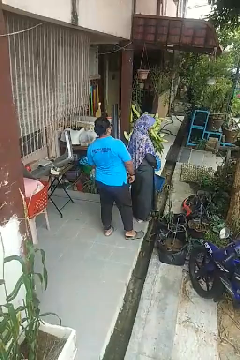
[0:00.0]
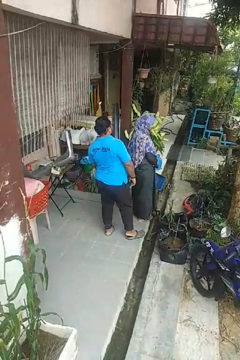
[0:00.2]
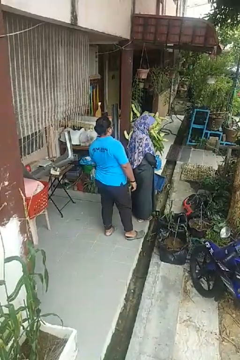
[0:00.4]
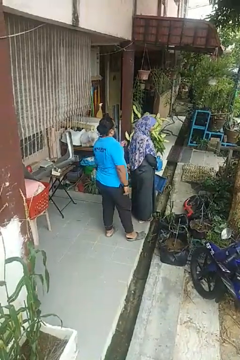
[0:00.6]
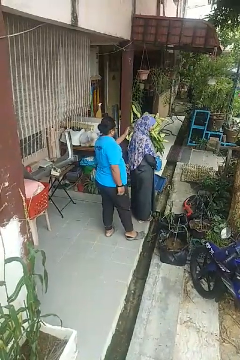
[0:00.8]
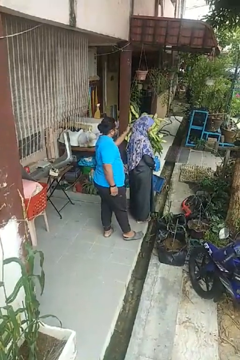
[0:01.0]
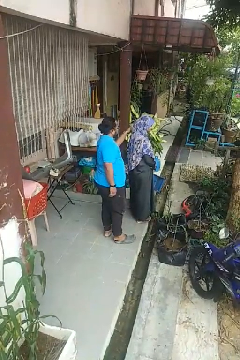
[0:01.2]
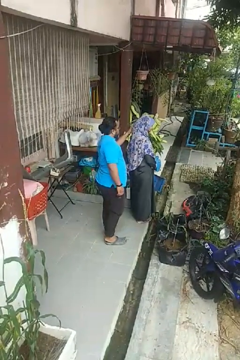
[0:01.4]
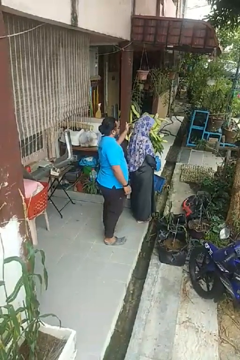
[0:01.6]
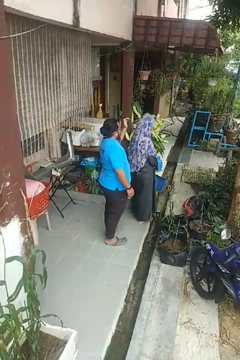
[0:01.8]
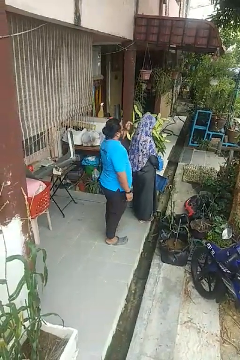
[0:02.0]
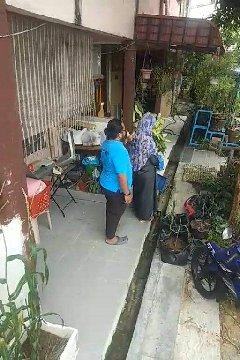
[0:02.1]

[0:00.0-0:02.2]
person touches back of person

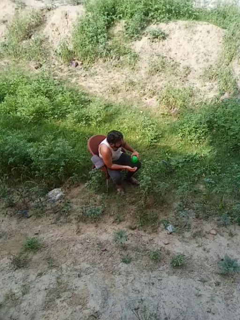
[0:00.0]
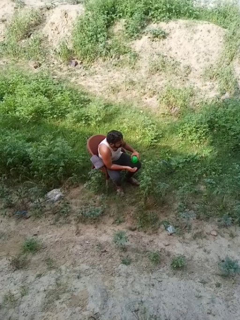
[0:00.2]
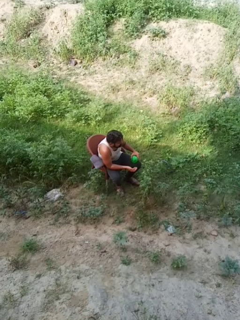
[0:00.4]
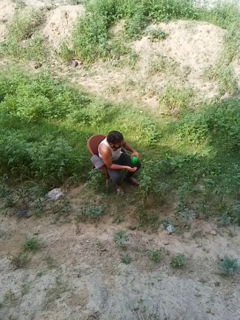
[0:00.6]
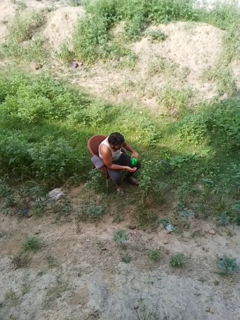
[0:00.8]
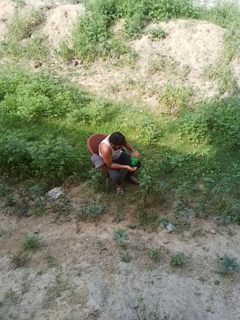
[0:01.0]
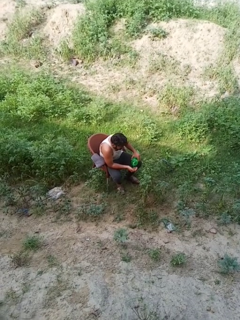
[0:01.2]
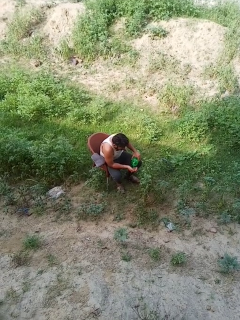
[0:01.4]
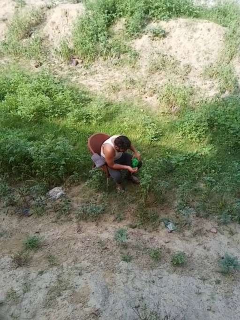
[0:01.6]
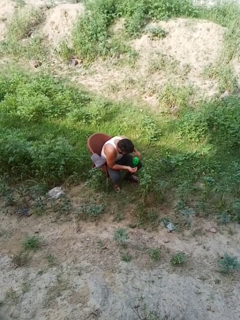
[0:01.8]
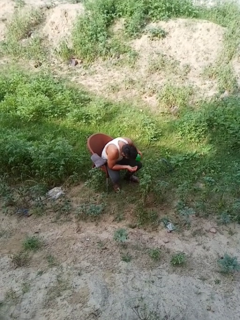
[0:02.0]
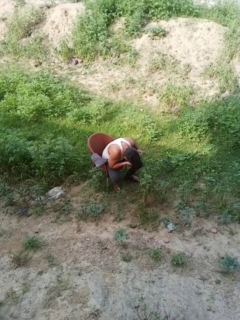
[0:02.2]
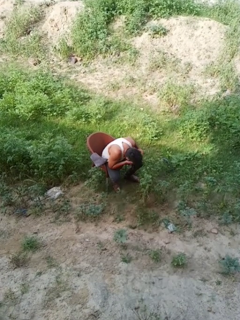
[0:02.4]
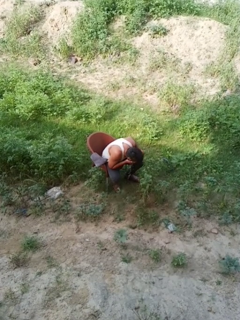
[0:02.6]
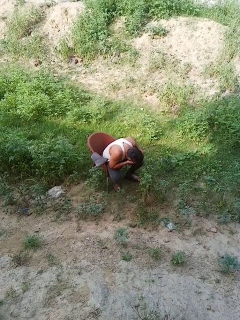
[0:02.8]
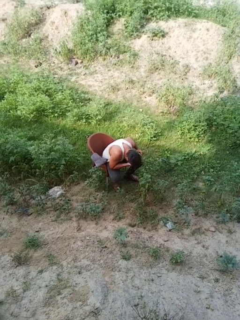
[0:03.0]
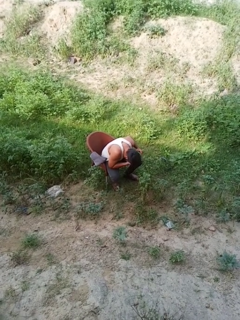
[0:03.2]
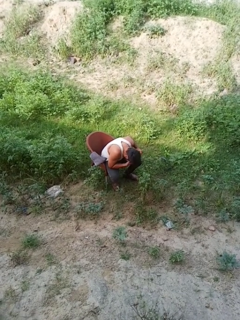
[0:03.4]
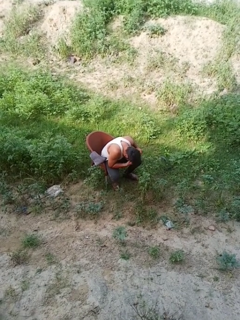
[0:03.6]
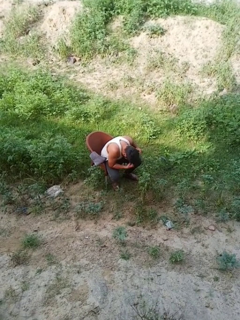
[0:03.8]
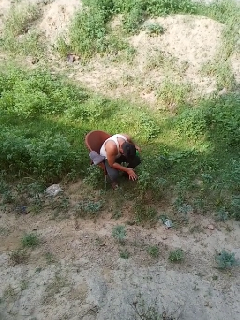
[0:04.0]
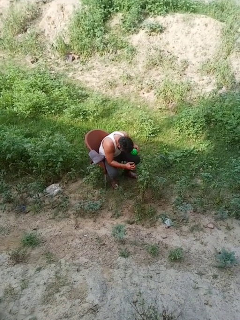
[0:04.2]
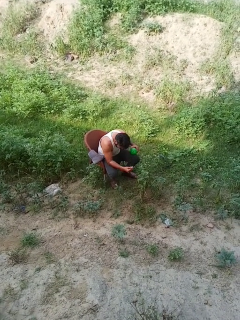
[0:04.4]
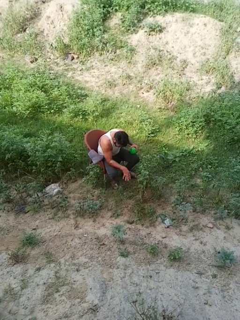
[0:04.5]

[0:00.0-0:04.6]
person washes face

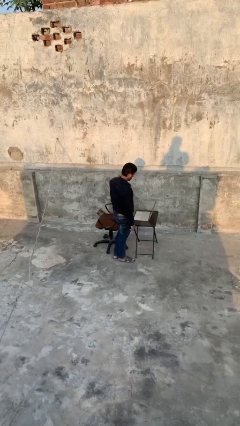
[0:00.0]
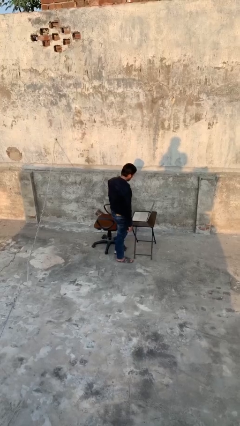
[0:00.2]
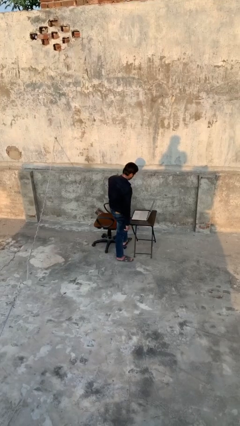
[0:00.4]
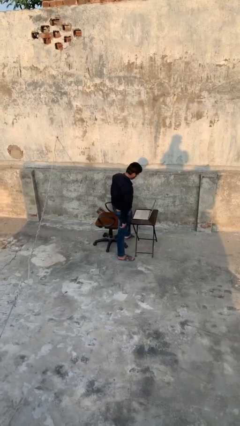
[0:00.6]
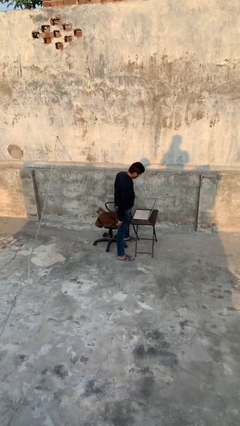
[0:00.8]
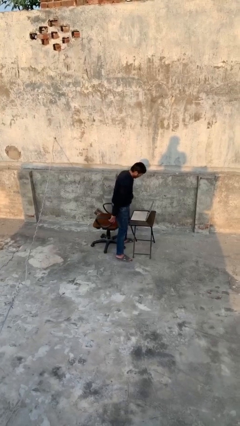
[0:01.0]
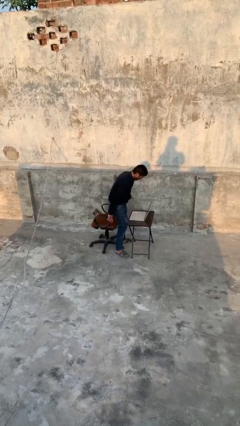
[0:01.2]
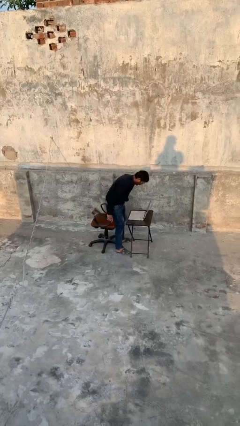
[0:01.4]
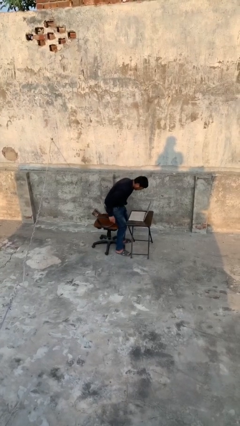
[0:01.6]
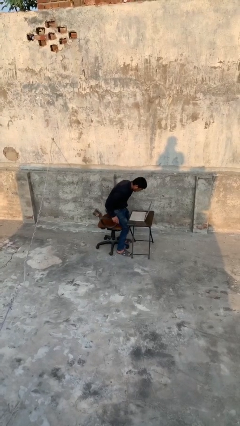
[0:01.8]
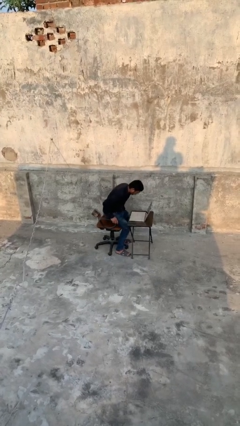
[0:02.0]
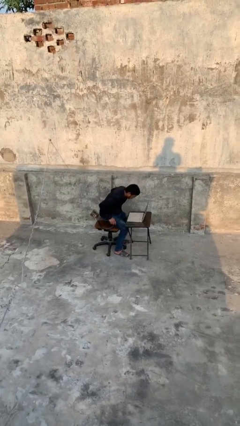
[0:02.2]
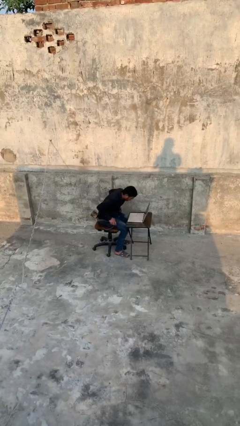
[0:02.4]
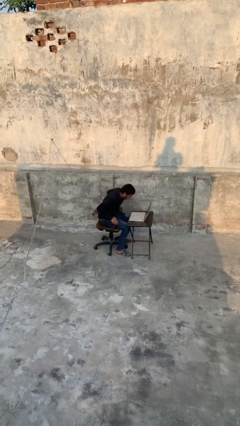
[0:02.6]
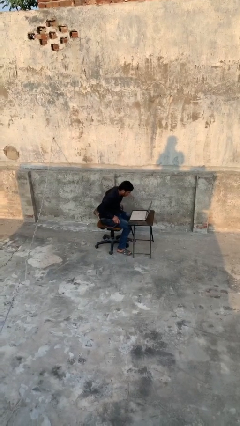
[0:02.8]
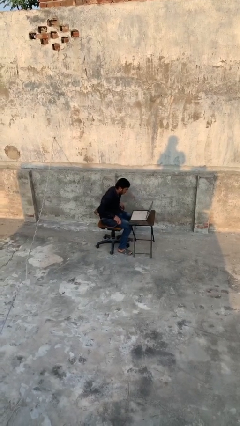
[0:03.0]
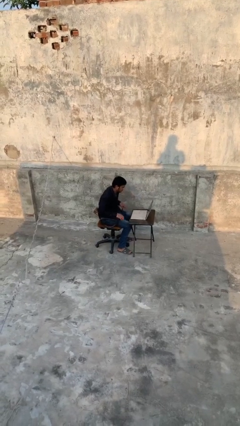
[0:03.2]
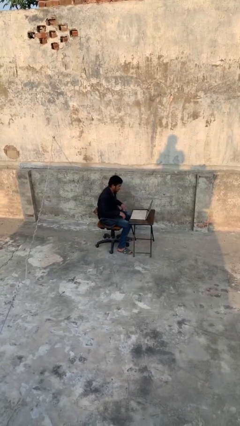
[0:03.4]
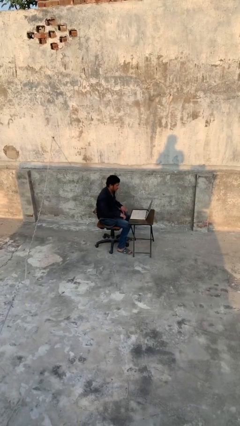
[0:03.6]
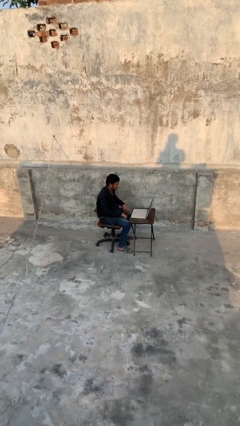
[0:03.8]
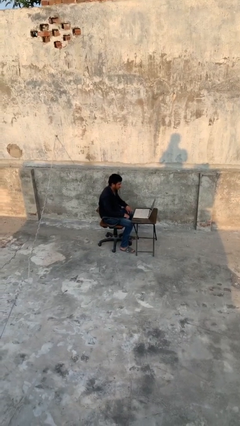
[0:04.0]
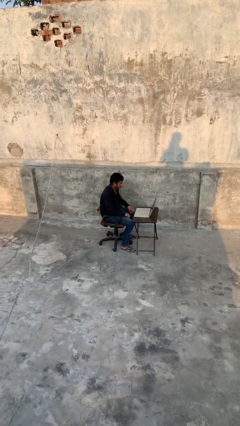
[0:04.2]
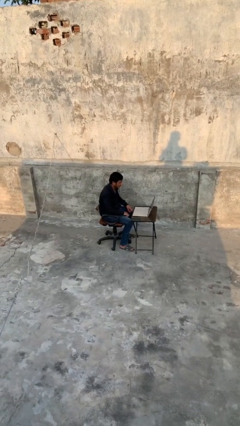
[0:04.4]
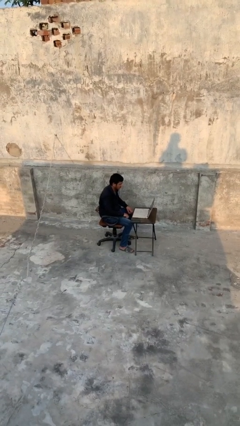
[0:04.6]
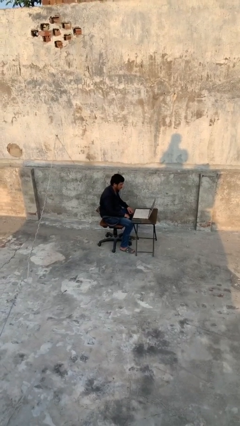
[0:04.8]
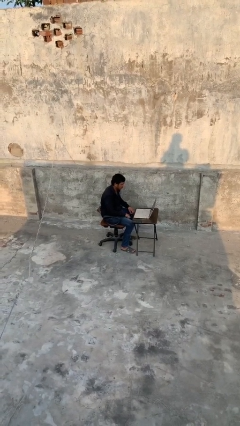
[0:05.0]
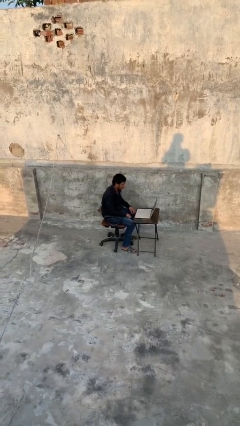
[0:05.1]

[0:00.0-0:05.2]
person sits down

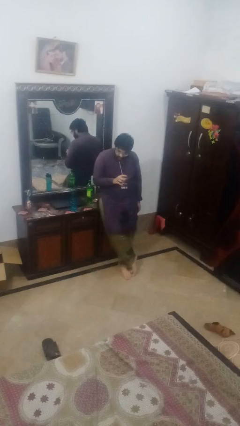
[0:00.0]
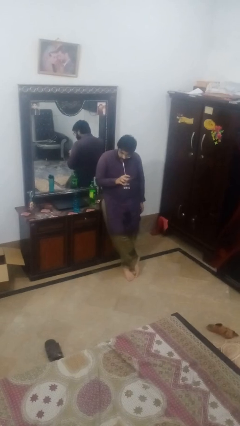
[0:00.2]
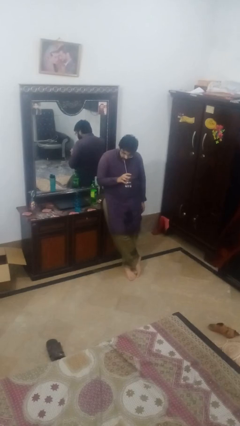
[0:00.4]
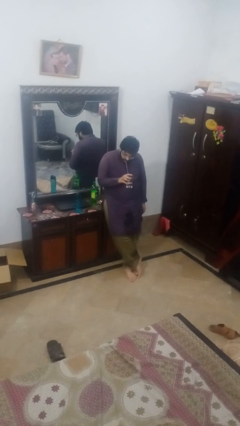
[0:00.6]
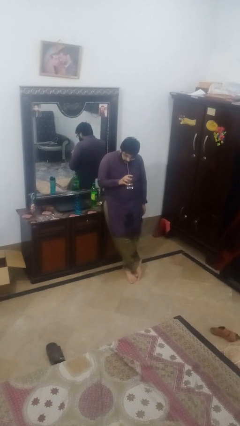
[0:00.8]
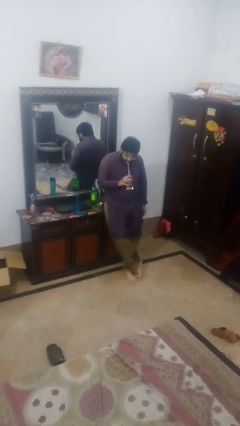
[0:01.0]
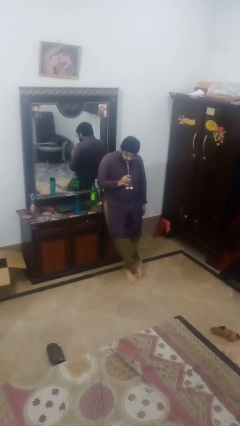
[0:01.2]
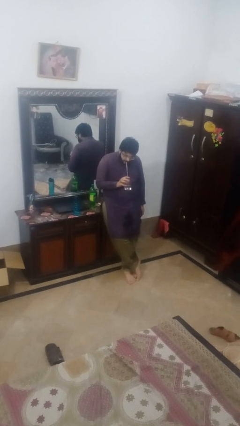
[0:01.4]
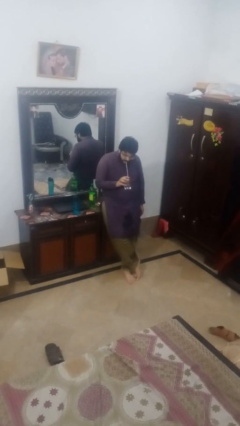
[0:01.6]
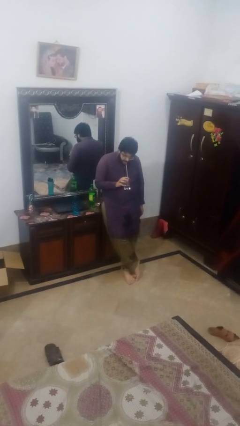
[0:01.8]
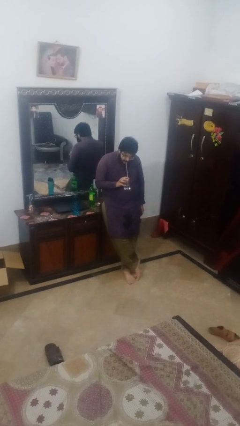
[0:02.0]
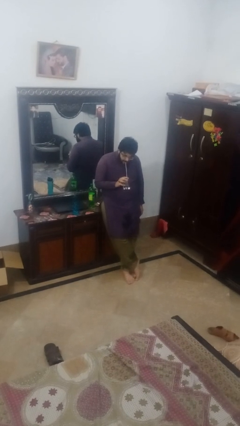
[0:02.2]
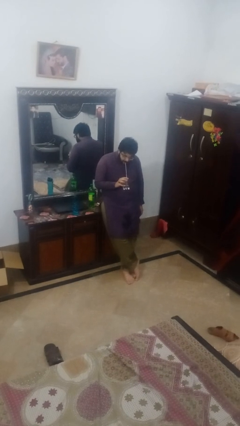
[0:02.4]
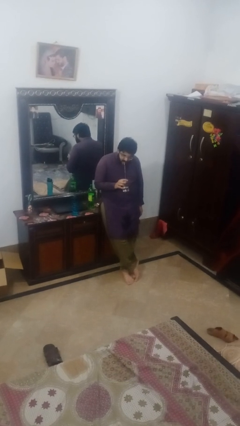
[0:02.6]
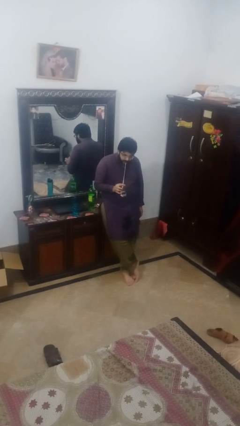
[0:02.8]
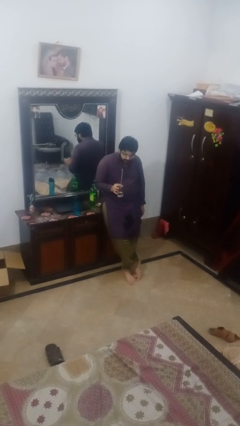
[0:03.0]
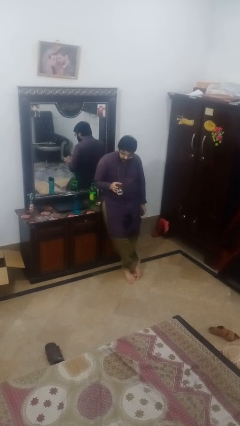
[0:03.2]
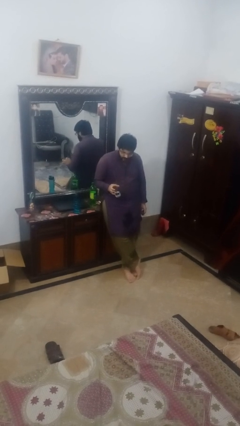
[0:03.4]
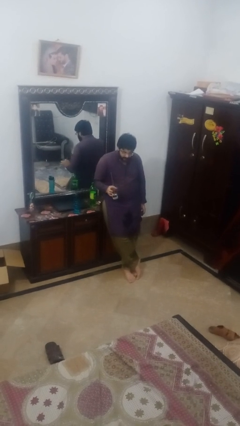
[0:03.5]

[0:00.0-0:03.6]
person drinks from straw

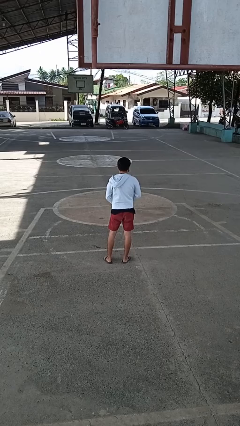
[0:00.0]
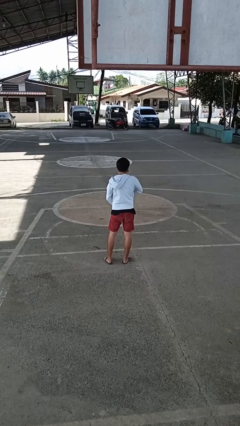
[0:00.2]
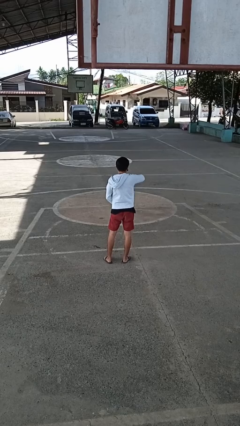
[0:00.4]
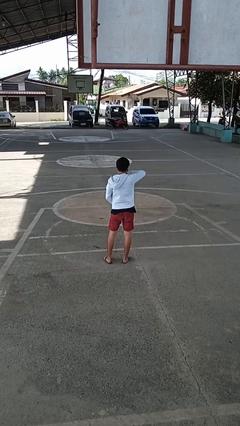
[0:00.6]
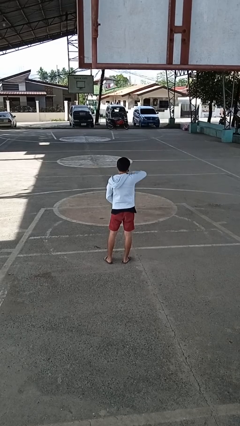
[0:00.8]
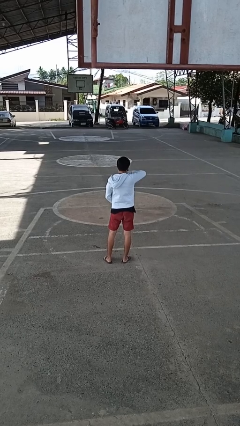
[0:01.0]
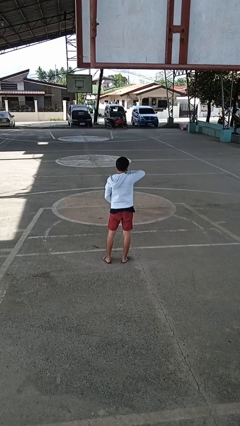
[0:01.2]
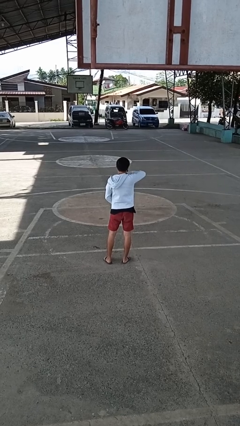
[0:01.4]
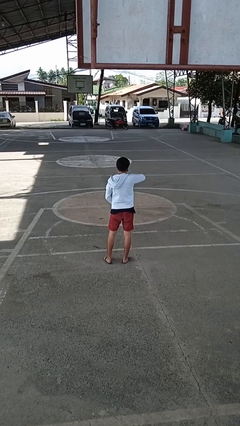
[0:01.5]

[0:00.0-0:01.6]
person zips up jacket

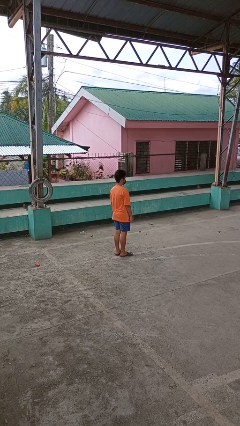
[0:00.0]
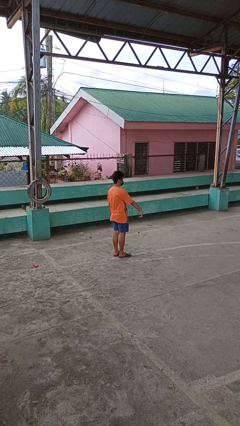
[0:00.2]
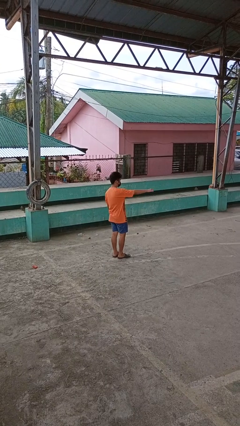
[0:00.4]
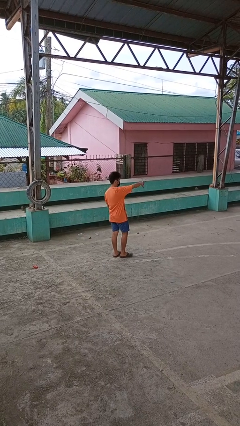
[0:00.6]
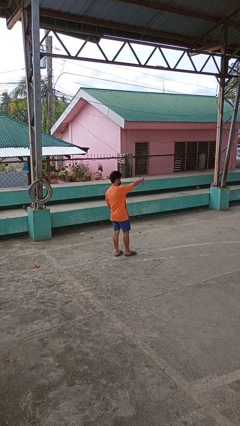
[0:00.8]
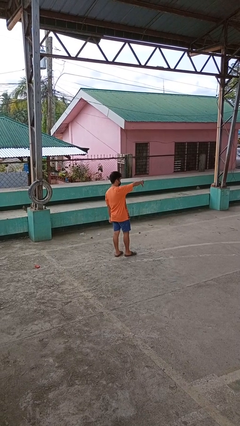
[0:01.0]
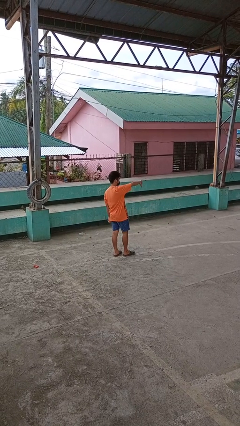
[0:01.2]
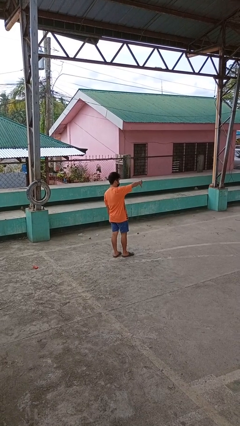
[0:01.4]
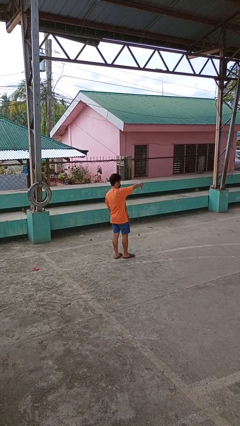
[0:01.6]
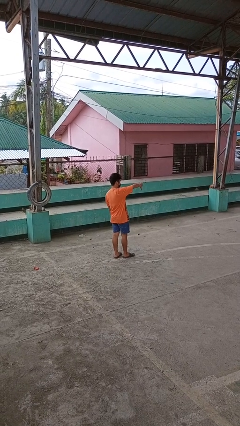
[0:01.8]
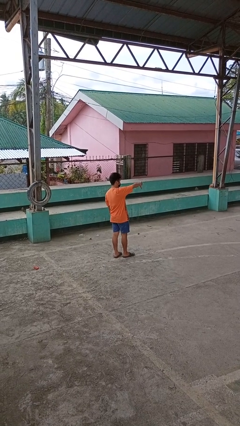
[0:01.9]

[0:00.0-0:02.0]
person gestures thumbs down
